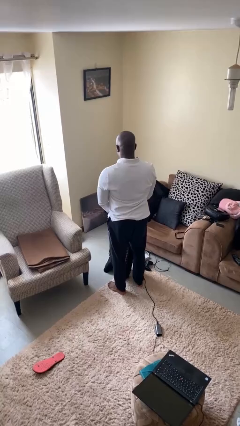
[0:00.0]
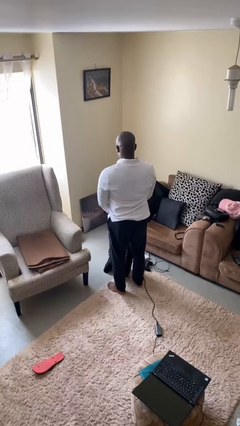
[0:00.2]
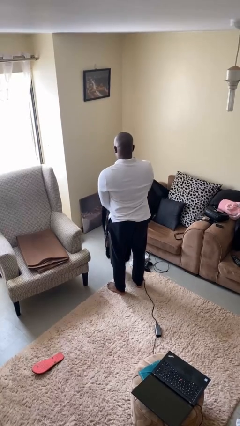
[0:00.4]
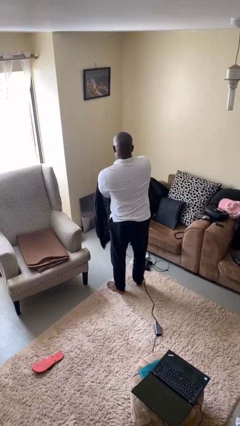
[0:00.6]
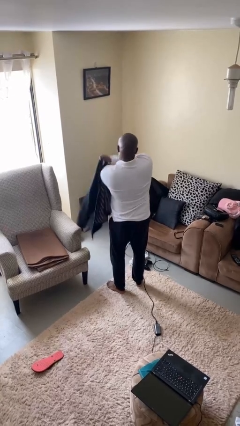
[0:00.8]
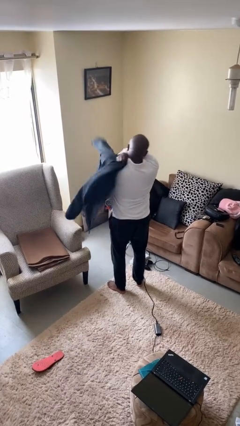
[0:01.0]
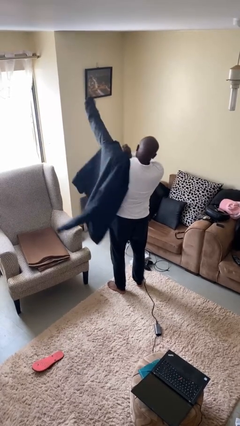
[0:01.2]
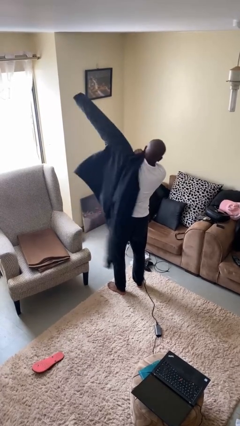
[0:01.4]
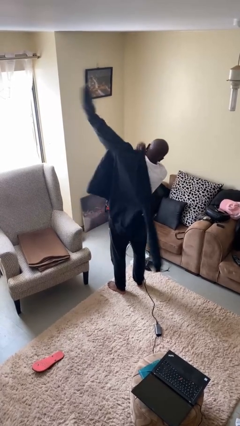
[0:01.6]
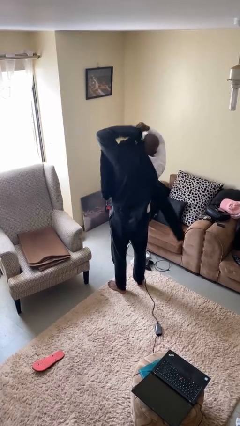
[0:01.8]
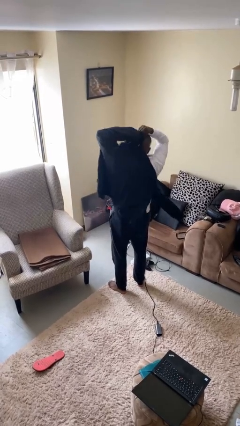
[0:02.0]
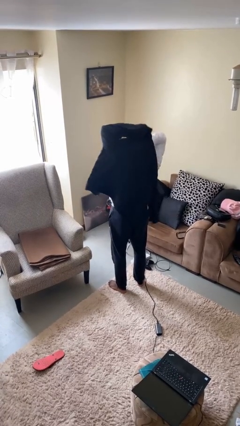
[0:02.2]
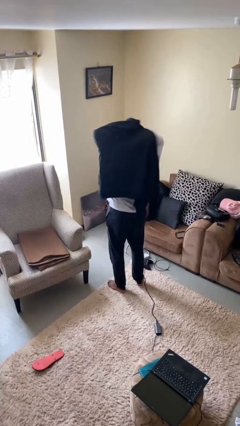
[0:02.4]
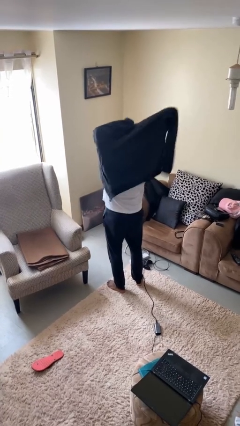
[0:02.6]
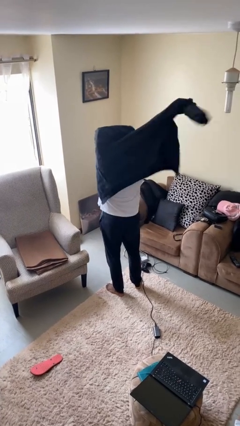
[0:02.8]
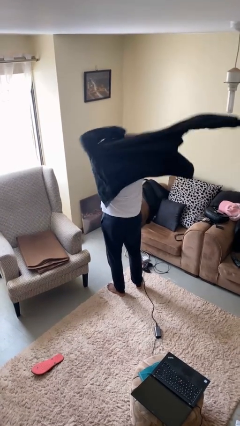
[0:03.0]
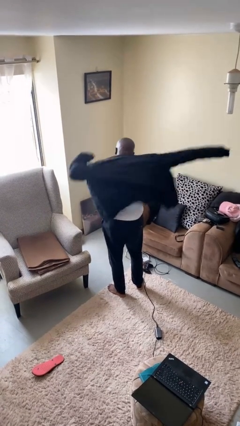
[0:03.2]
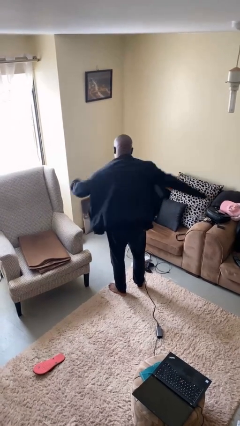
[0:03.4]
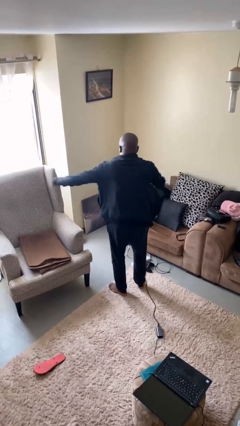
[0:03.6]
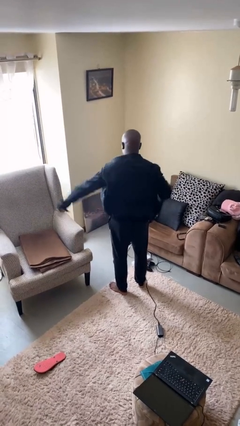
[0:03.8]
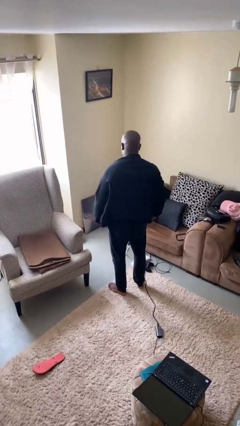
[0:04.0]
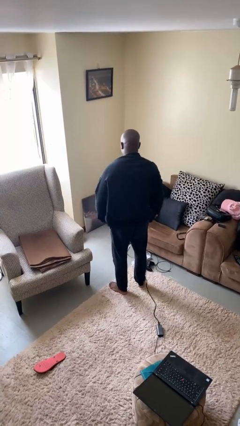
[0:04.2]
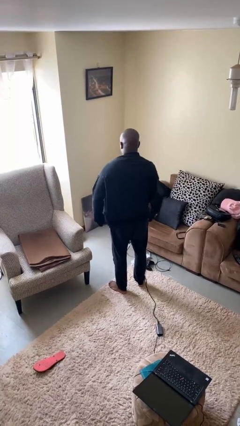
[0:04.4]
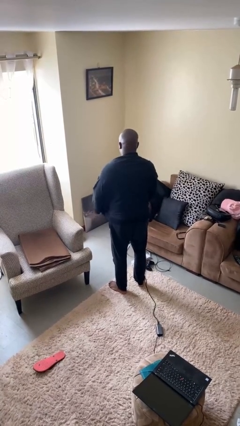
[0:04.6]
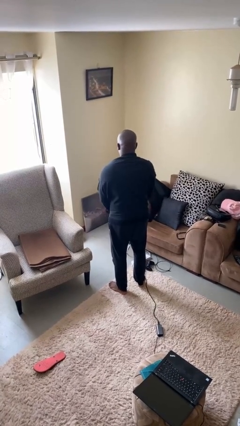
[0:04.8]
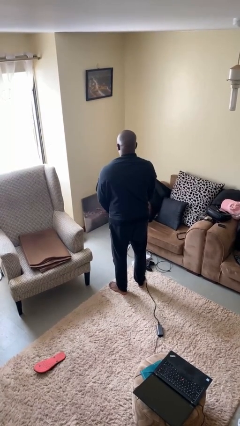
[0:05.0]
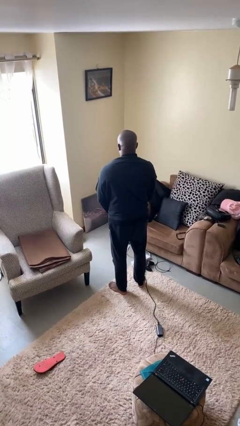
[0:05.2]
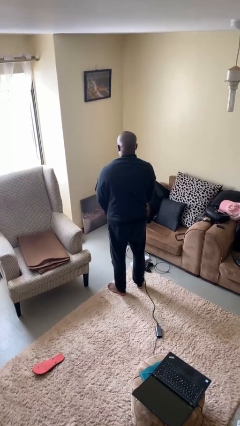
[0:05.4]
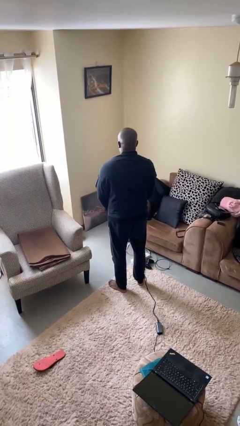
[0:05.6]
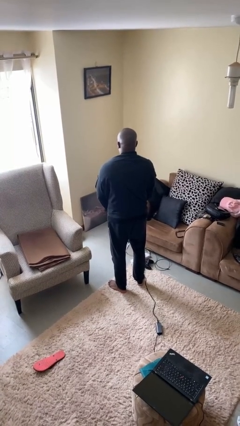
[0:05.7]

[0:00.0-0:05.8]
person puts on jacket

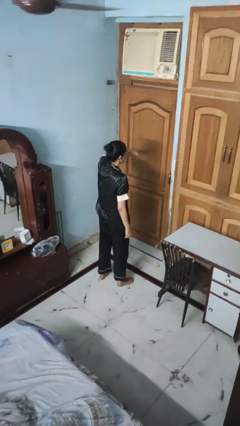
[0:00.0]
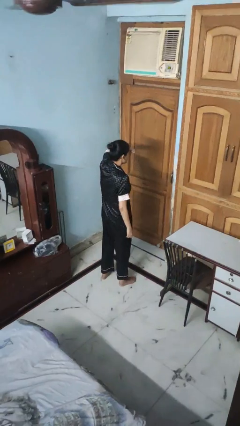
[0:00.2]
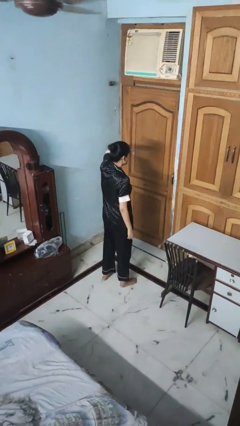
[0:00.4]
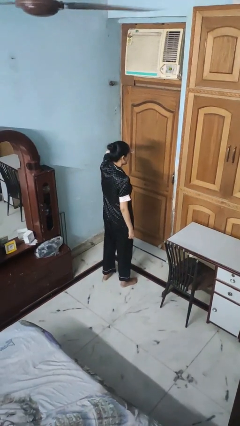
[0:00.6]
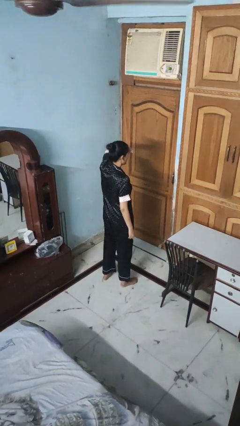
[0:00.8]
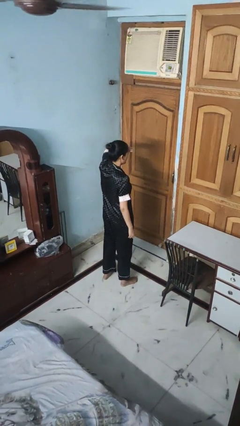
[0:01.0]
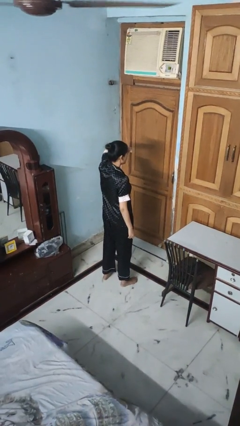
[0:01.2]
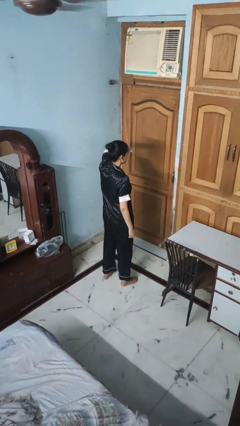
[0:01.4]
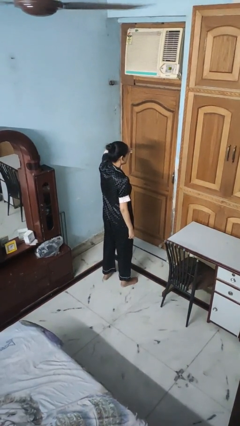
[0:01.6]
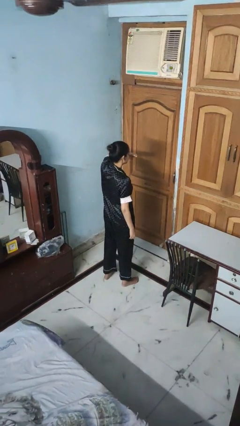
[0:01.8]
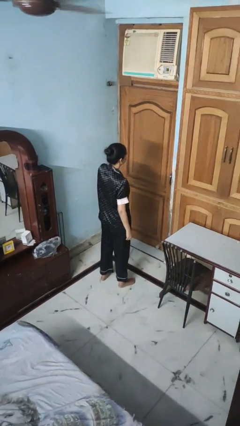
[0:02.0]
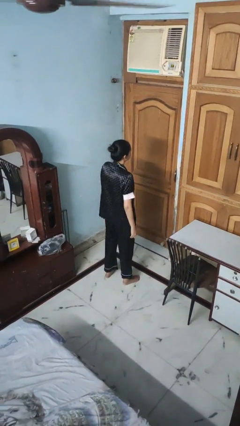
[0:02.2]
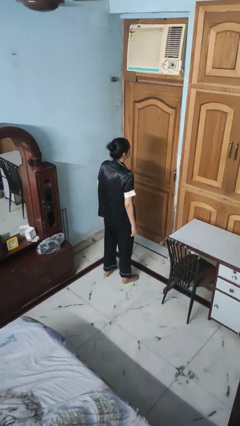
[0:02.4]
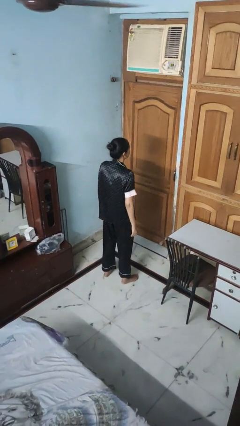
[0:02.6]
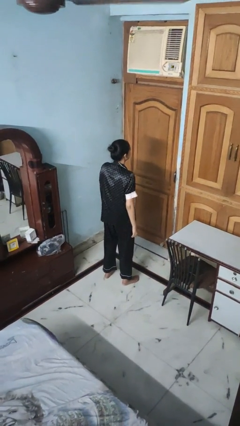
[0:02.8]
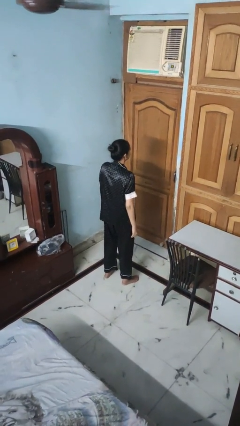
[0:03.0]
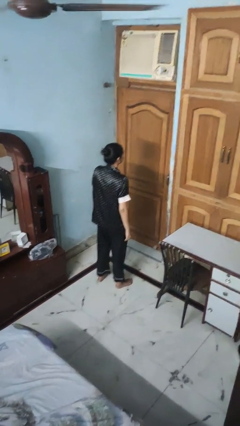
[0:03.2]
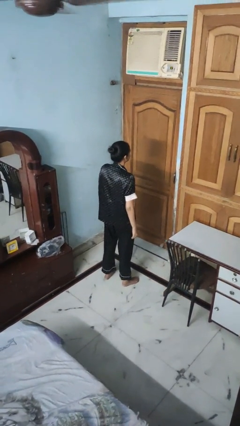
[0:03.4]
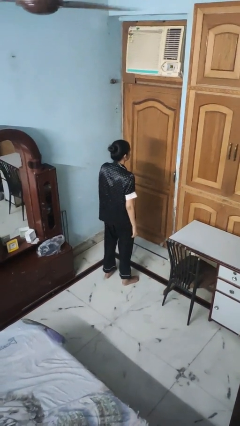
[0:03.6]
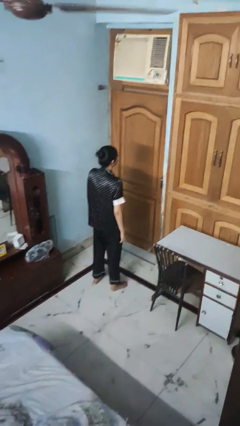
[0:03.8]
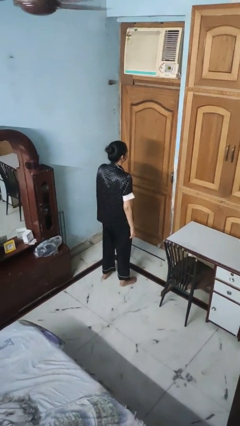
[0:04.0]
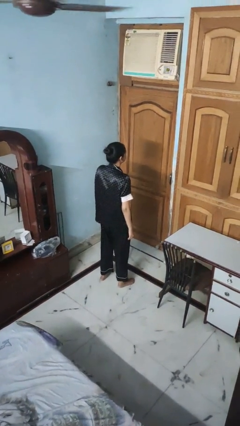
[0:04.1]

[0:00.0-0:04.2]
person shades eyes

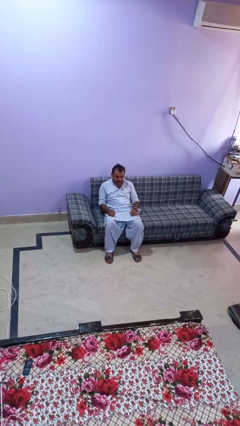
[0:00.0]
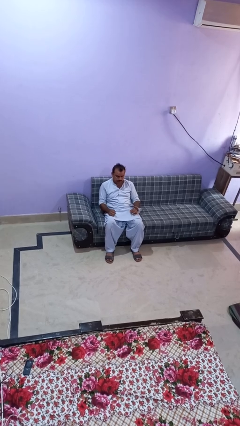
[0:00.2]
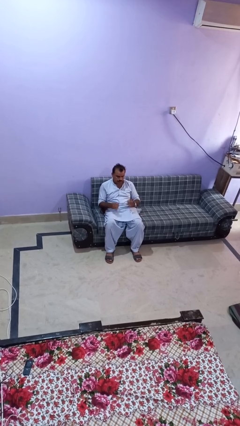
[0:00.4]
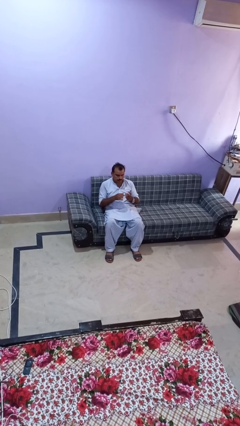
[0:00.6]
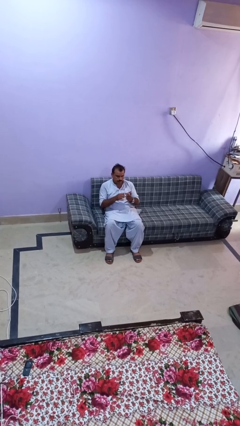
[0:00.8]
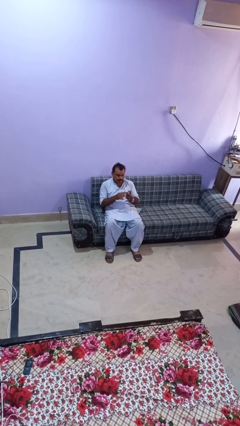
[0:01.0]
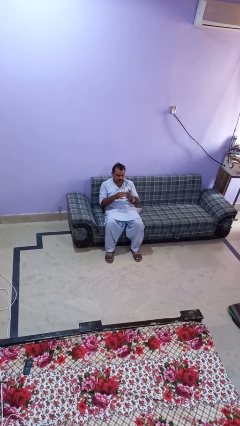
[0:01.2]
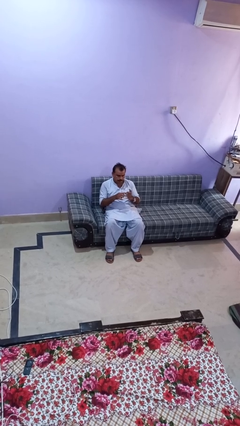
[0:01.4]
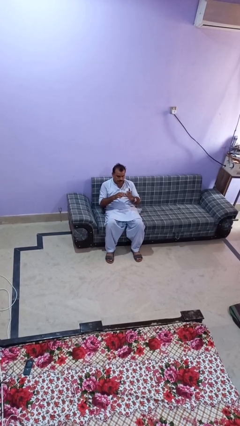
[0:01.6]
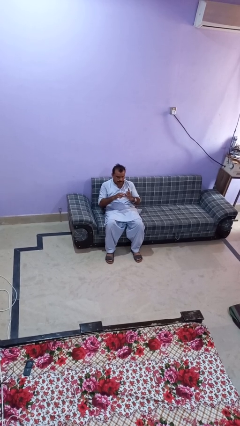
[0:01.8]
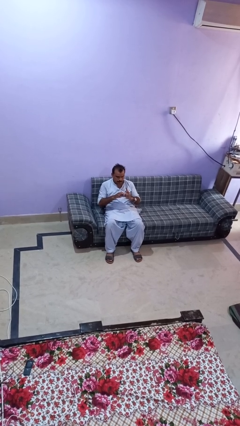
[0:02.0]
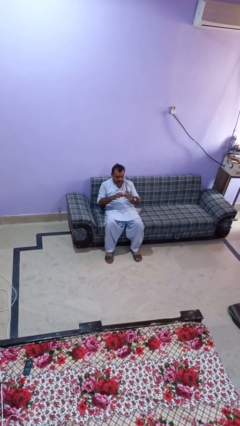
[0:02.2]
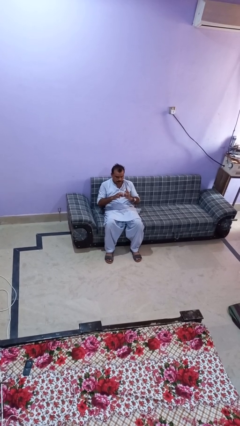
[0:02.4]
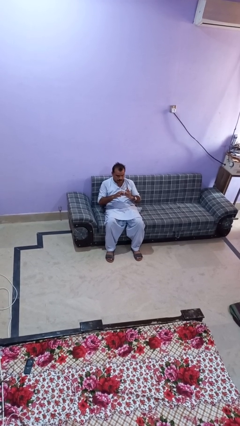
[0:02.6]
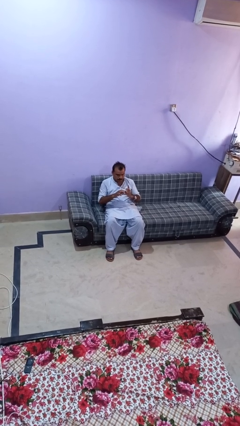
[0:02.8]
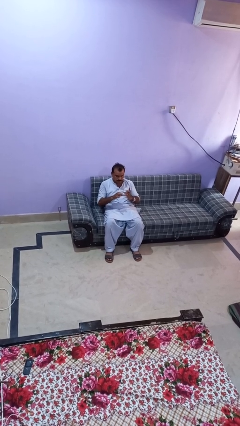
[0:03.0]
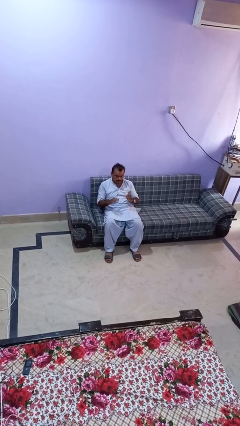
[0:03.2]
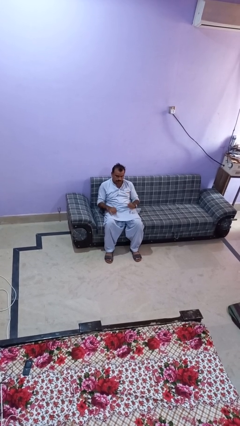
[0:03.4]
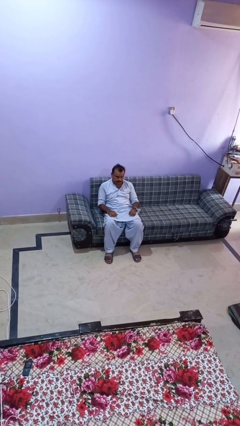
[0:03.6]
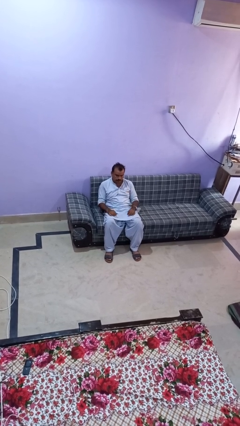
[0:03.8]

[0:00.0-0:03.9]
person files fingernails

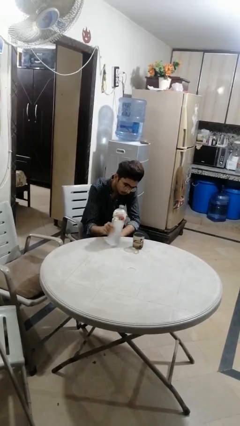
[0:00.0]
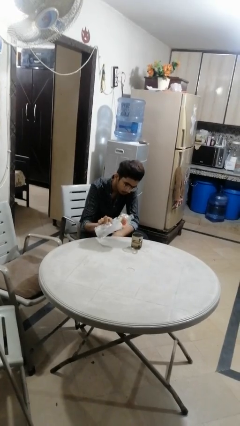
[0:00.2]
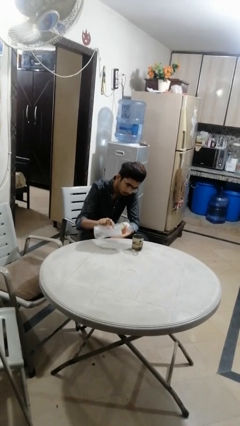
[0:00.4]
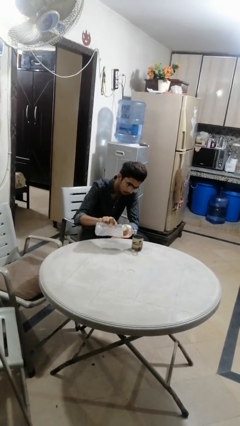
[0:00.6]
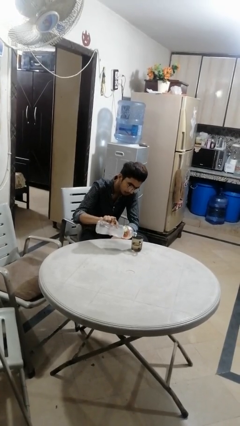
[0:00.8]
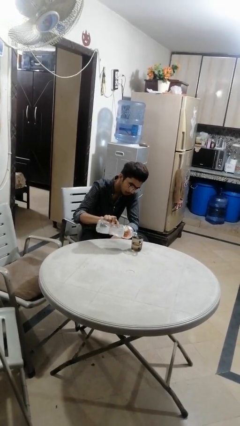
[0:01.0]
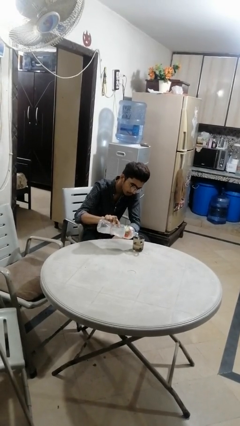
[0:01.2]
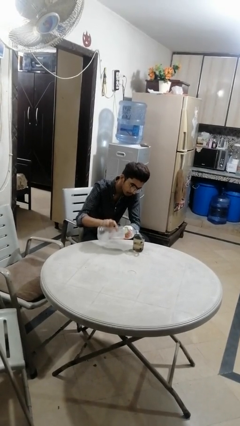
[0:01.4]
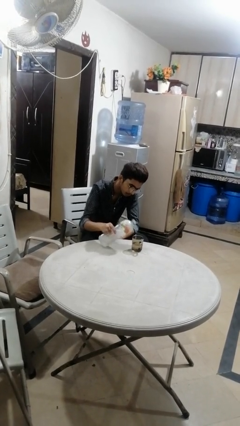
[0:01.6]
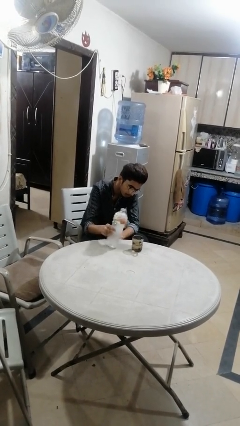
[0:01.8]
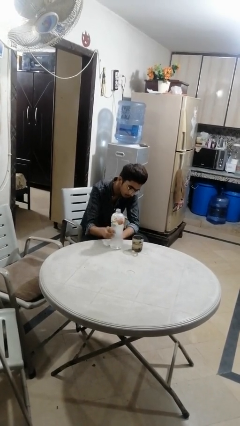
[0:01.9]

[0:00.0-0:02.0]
person pours liquid into cup

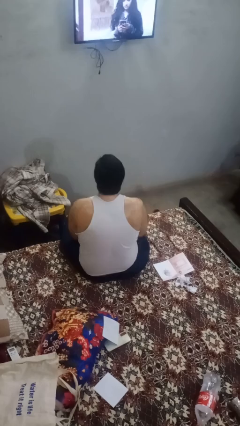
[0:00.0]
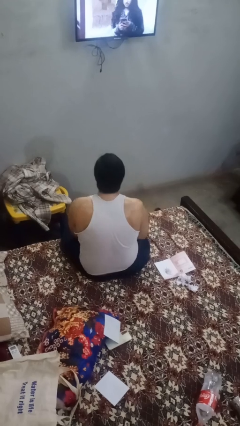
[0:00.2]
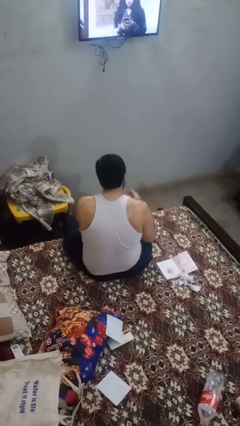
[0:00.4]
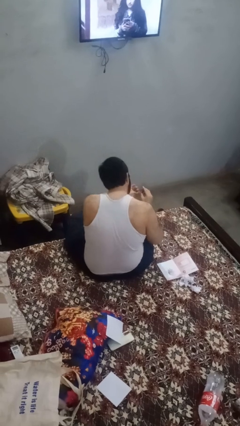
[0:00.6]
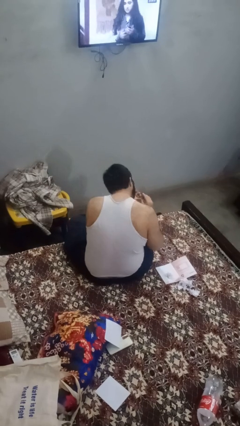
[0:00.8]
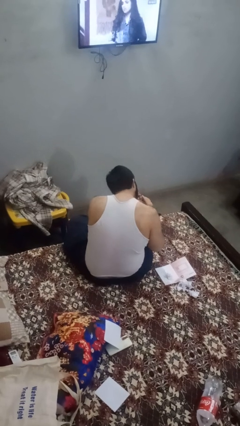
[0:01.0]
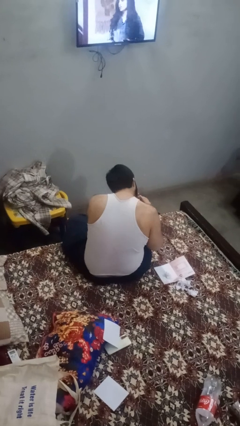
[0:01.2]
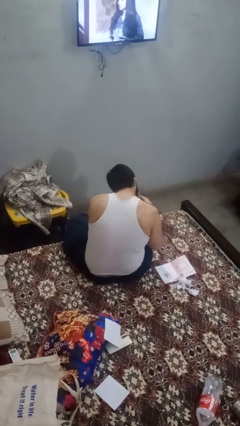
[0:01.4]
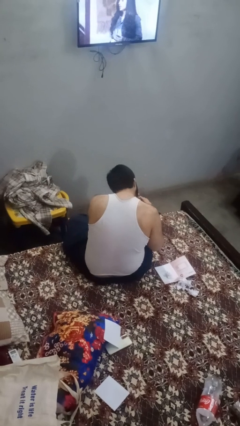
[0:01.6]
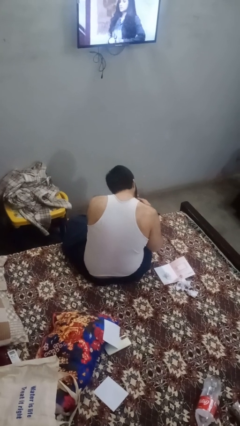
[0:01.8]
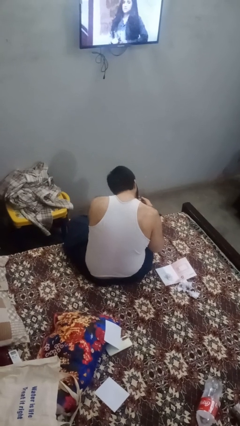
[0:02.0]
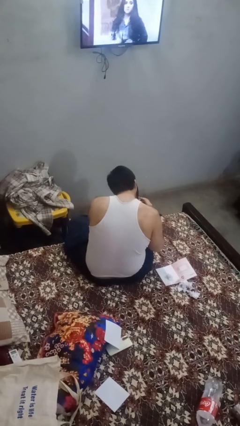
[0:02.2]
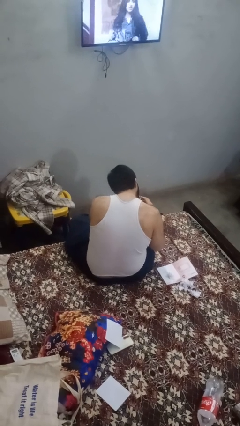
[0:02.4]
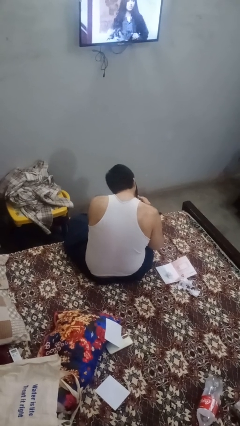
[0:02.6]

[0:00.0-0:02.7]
person clips fingernails
